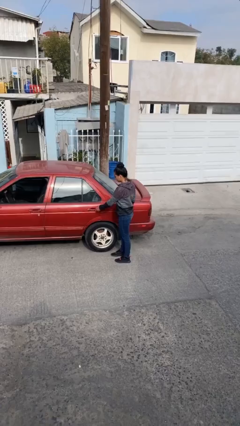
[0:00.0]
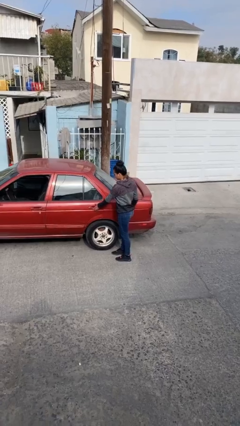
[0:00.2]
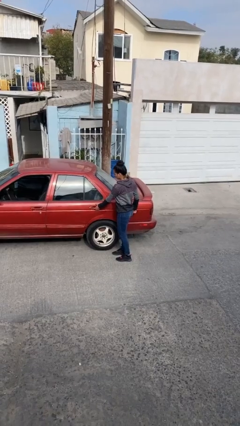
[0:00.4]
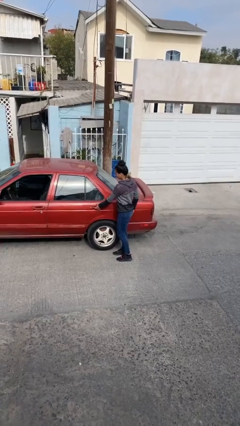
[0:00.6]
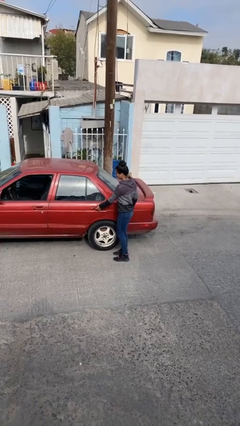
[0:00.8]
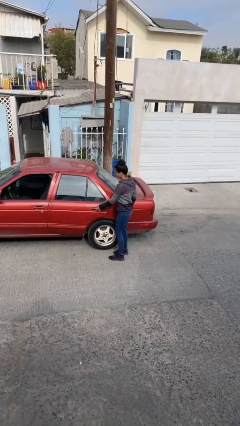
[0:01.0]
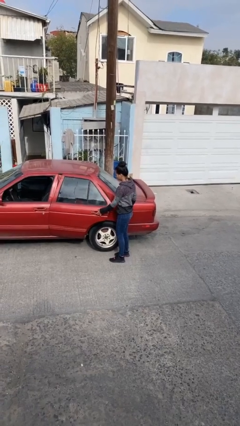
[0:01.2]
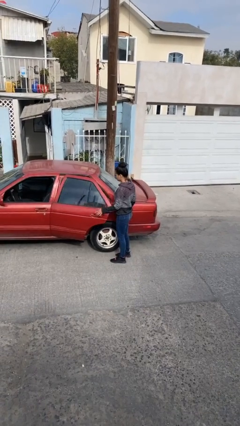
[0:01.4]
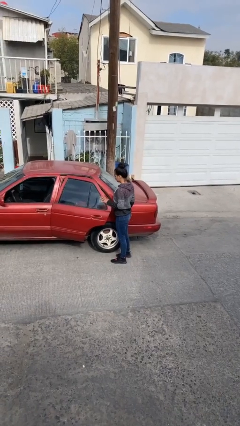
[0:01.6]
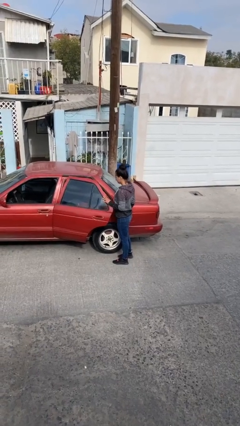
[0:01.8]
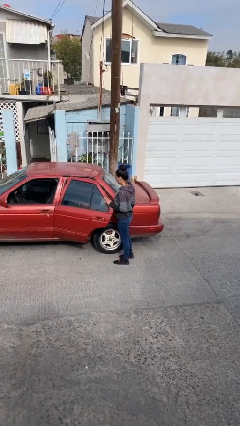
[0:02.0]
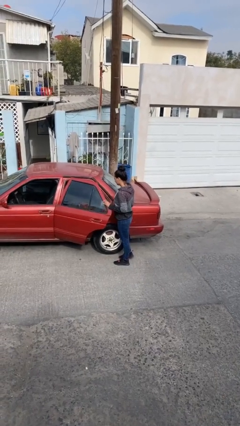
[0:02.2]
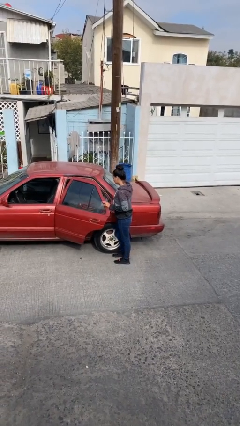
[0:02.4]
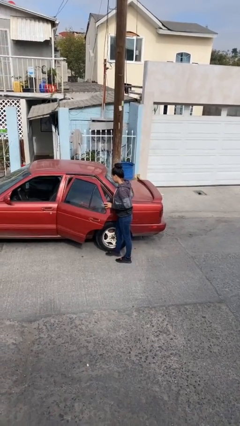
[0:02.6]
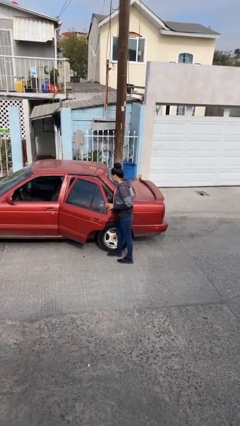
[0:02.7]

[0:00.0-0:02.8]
person opens car door

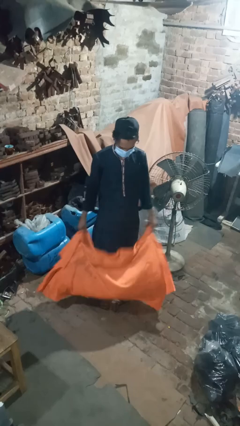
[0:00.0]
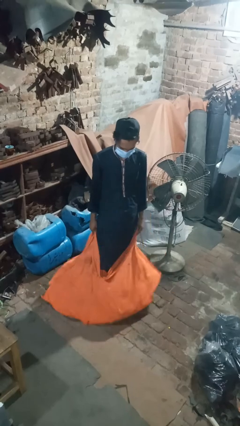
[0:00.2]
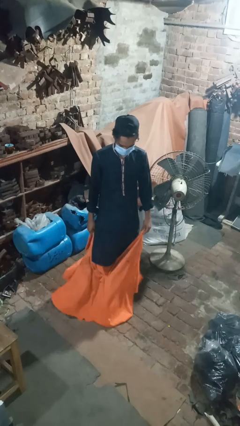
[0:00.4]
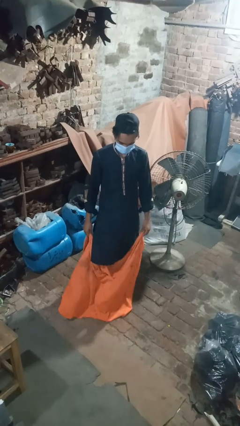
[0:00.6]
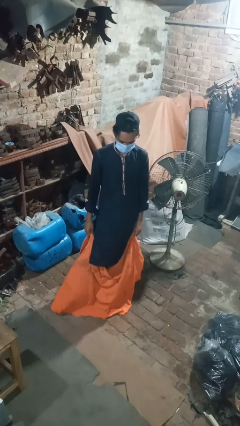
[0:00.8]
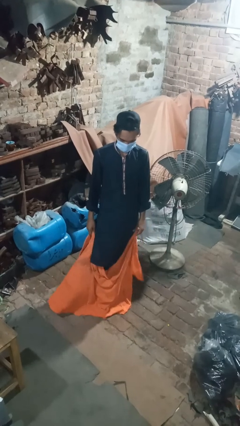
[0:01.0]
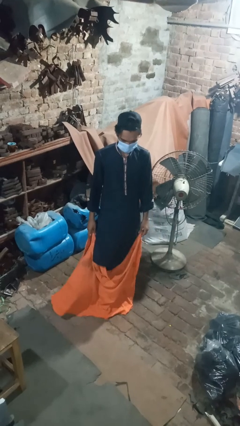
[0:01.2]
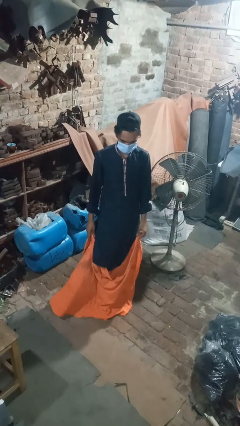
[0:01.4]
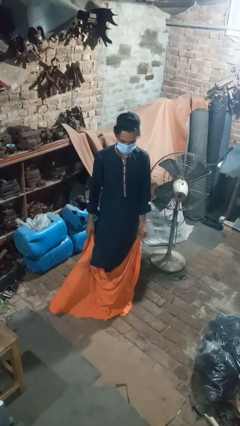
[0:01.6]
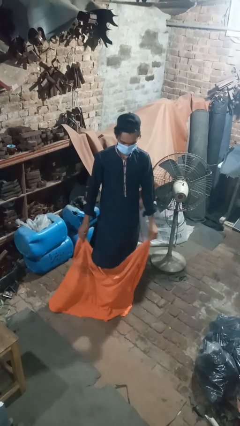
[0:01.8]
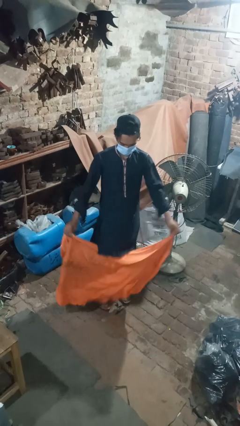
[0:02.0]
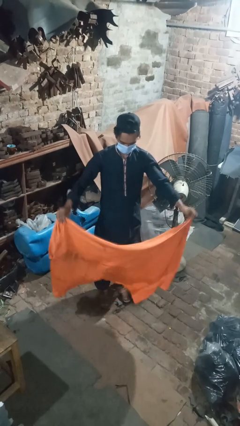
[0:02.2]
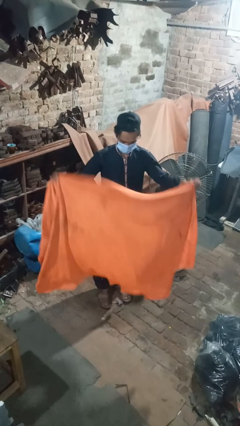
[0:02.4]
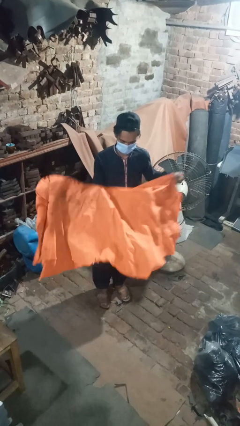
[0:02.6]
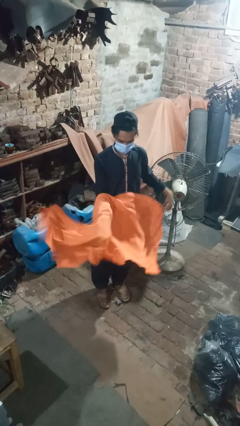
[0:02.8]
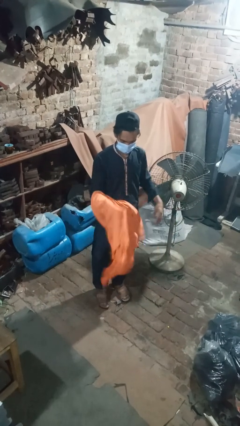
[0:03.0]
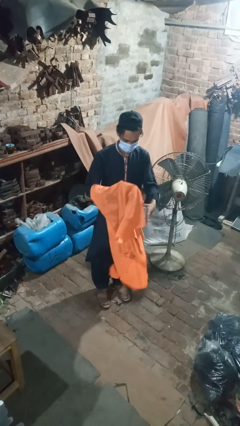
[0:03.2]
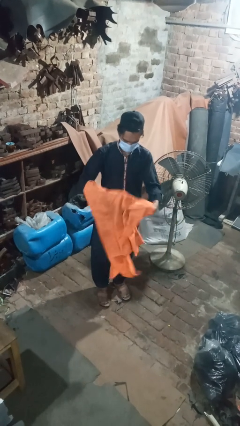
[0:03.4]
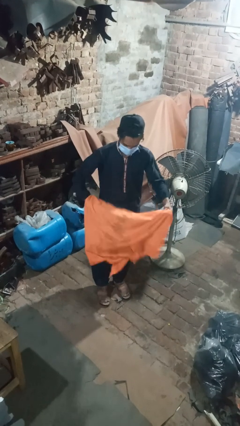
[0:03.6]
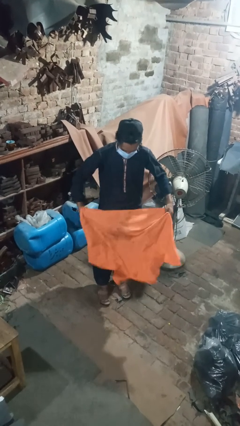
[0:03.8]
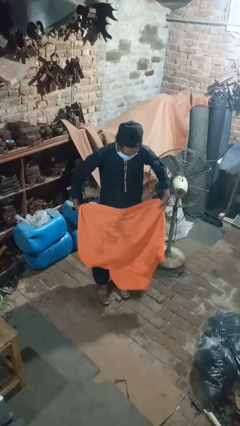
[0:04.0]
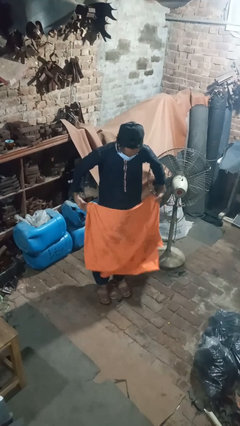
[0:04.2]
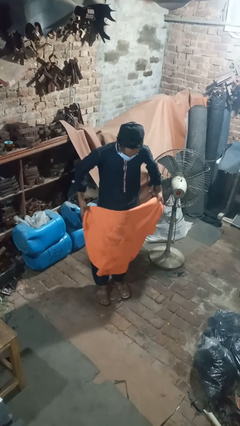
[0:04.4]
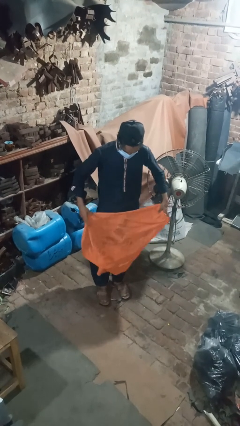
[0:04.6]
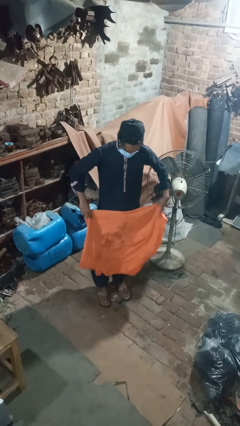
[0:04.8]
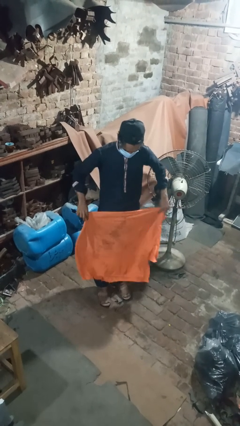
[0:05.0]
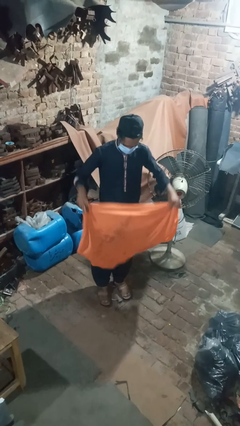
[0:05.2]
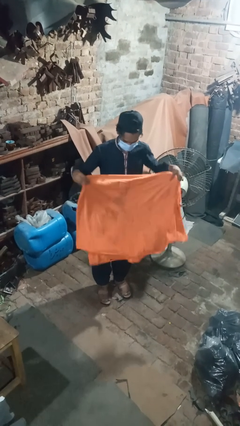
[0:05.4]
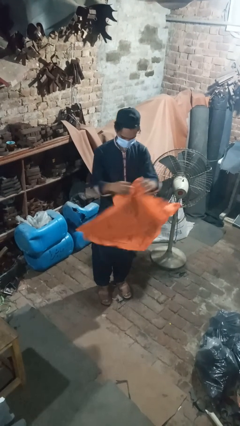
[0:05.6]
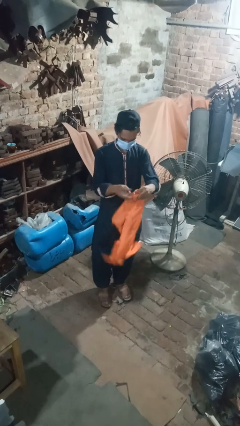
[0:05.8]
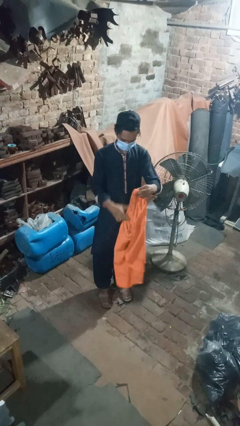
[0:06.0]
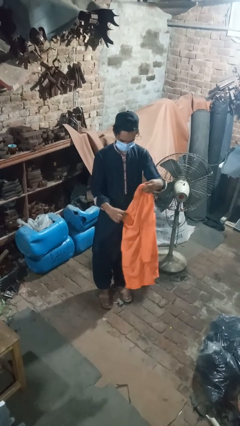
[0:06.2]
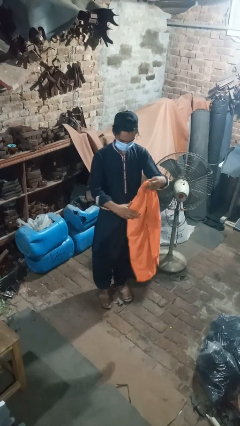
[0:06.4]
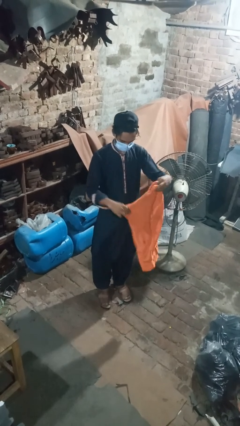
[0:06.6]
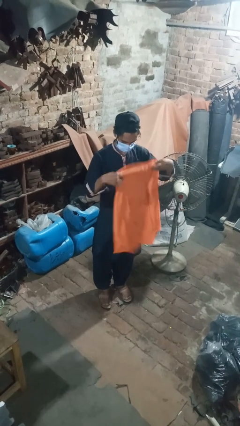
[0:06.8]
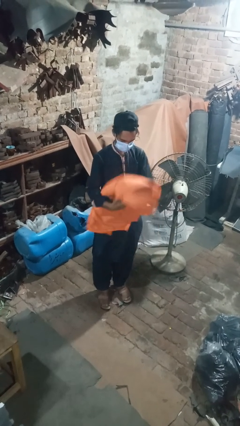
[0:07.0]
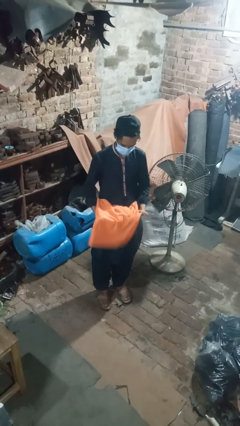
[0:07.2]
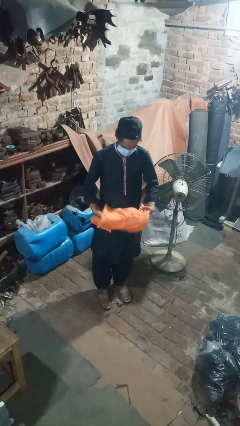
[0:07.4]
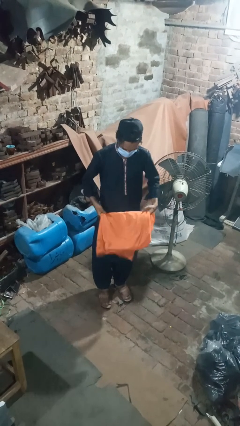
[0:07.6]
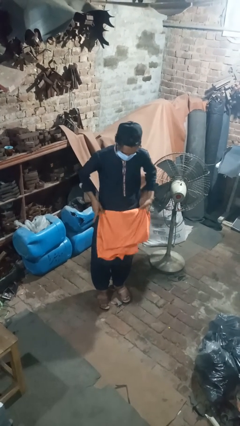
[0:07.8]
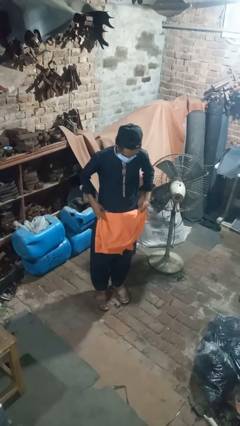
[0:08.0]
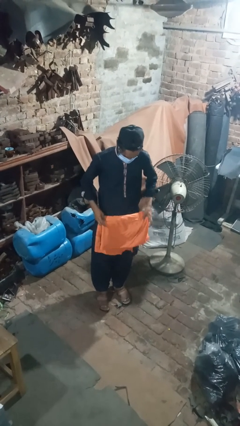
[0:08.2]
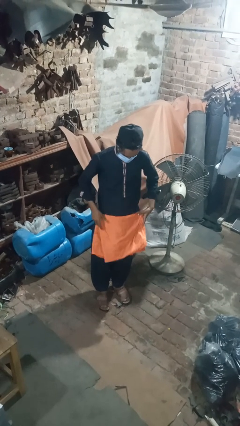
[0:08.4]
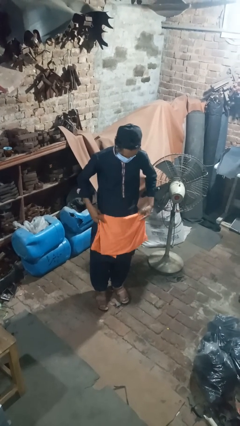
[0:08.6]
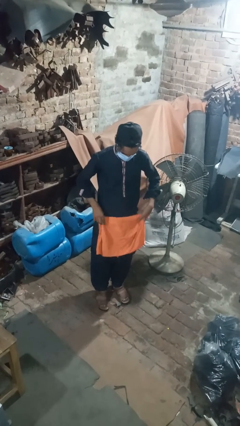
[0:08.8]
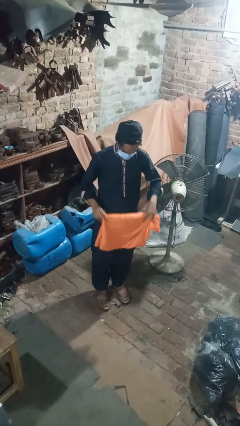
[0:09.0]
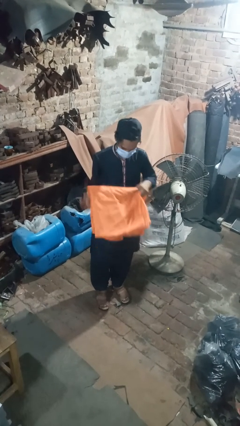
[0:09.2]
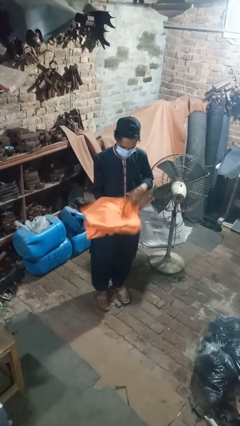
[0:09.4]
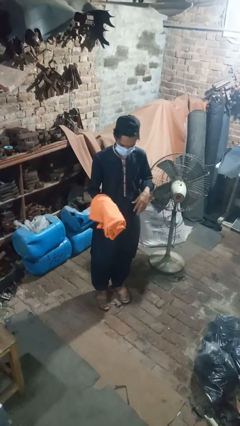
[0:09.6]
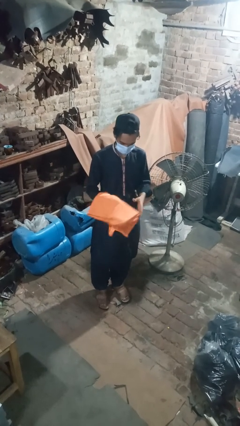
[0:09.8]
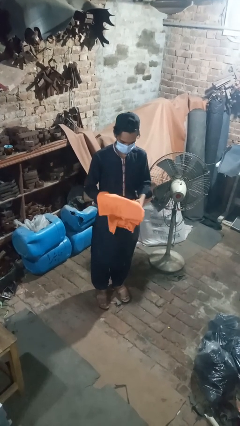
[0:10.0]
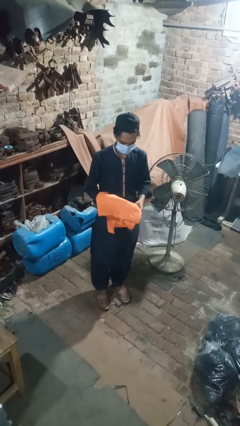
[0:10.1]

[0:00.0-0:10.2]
person folds blanket

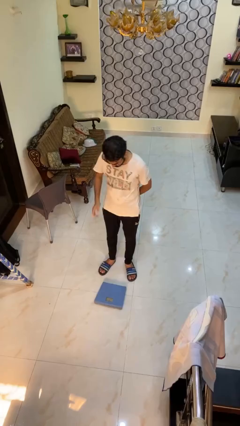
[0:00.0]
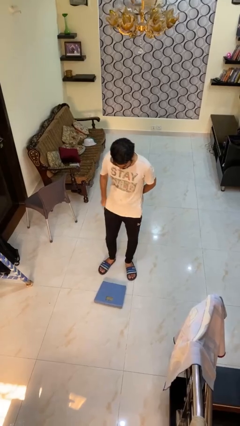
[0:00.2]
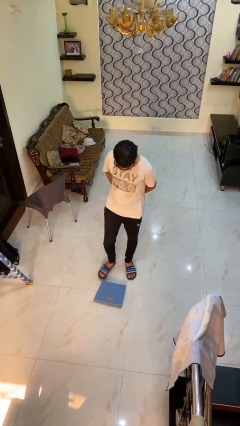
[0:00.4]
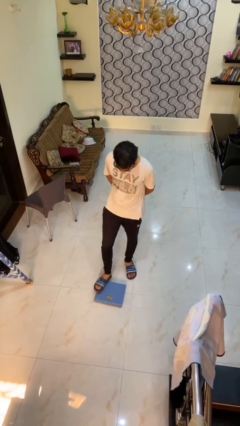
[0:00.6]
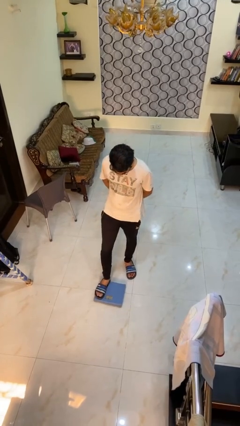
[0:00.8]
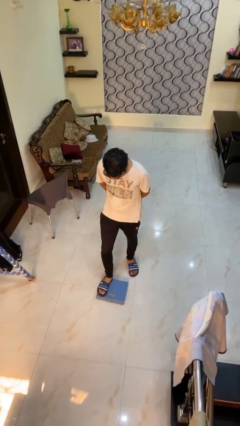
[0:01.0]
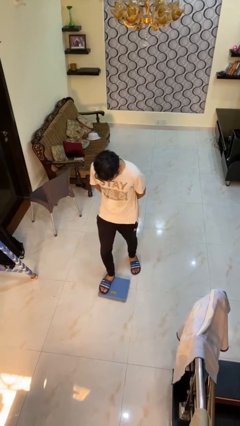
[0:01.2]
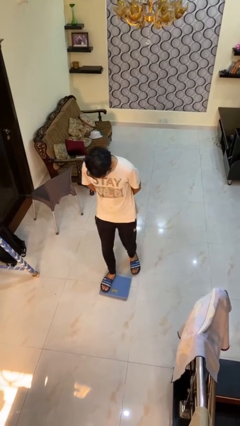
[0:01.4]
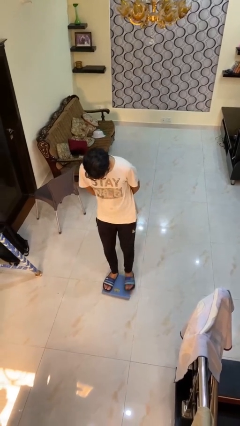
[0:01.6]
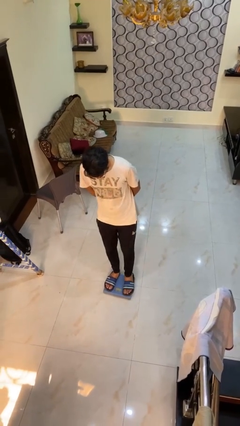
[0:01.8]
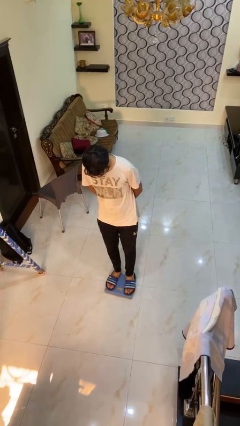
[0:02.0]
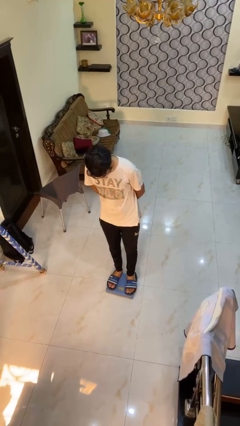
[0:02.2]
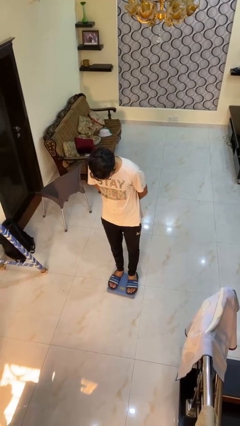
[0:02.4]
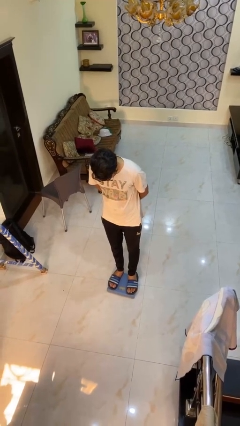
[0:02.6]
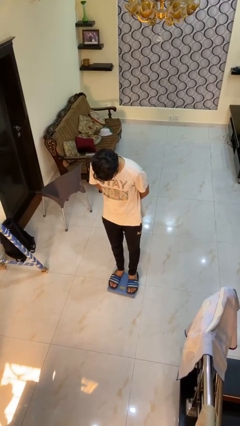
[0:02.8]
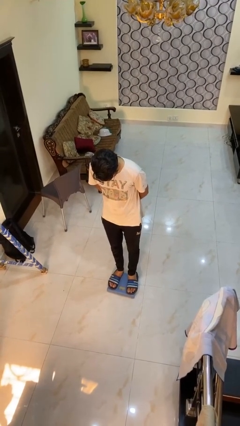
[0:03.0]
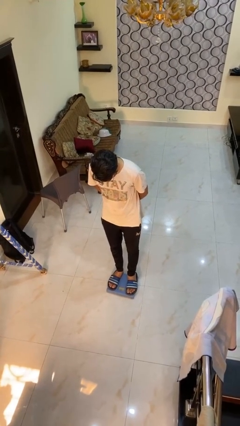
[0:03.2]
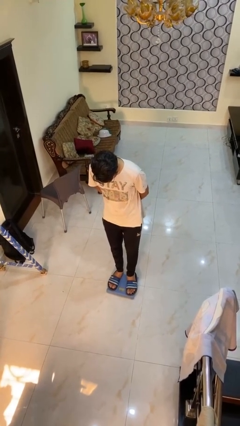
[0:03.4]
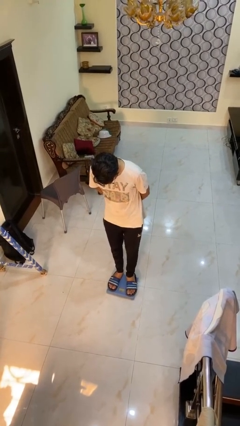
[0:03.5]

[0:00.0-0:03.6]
person uses bodyweight scale

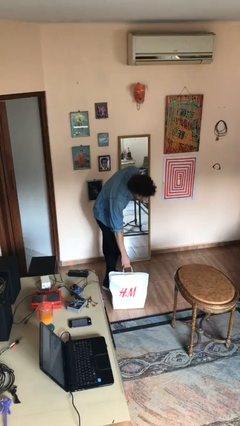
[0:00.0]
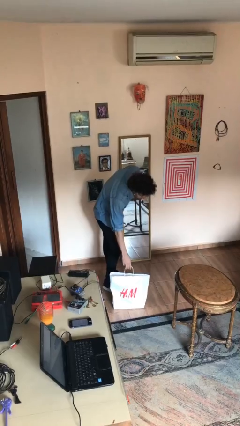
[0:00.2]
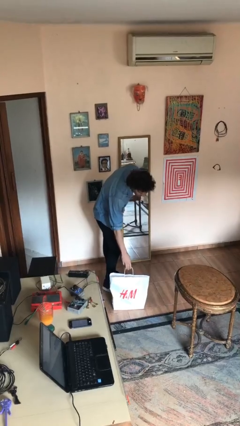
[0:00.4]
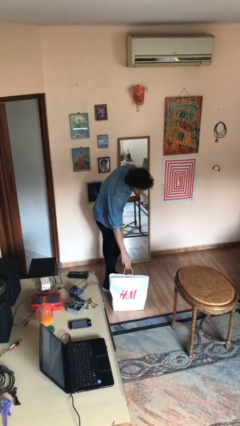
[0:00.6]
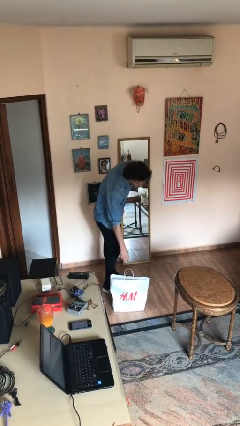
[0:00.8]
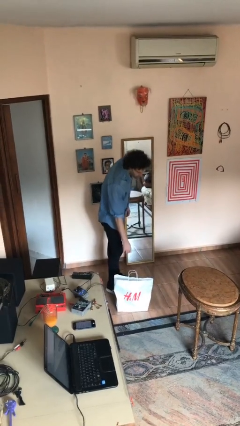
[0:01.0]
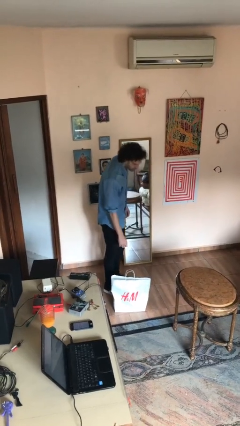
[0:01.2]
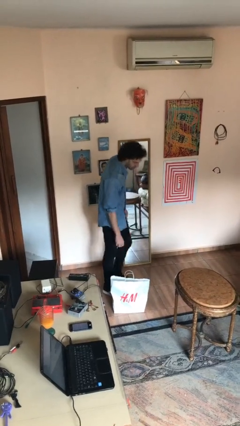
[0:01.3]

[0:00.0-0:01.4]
person puts down object on floor
